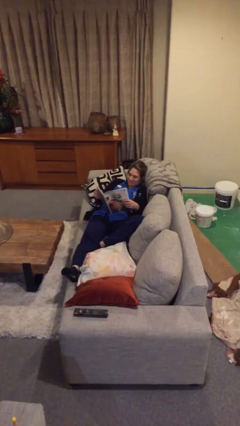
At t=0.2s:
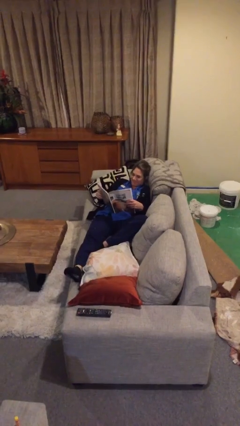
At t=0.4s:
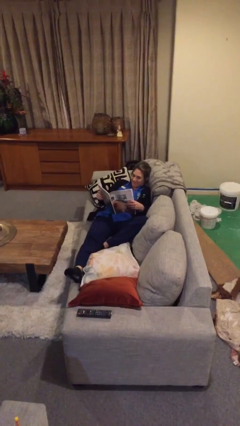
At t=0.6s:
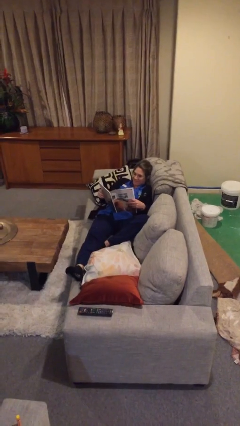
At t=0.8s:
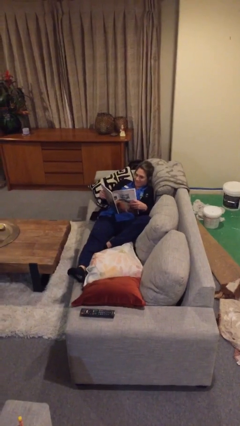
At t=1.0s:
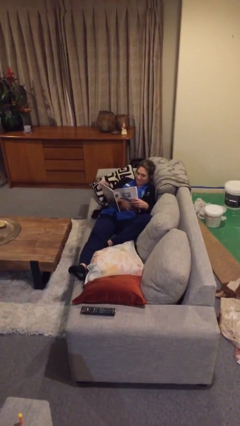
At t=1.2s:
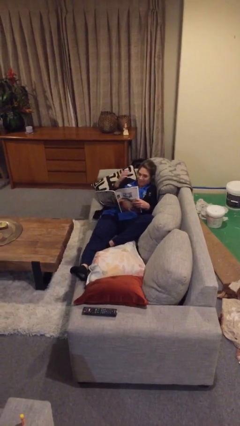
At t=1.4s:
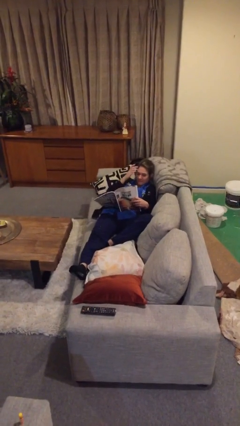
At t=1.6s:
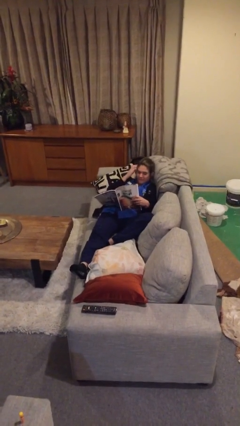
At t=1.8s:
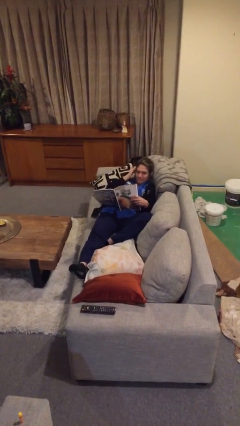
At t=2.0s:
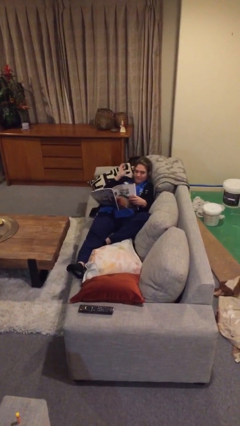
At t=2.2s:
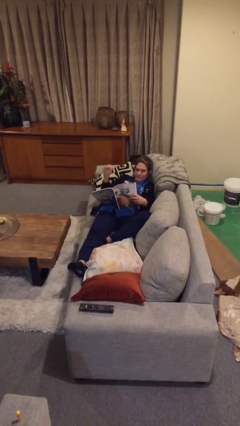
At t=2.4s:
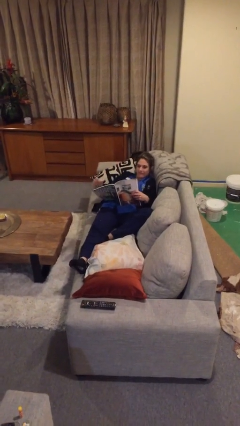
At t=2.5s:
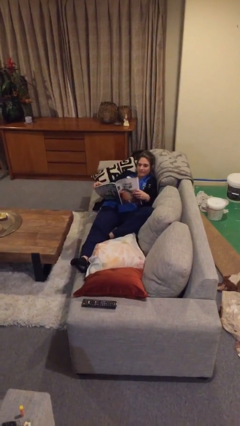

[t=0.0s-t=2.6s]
person reads document

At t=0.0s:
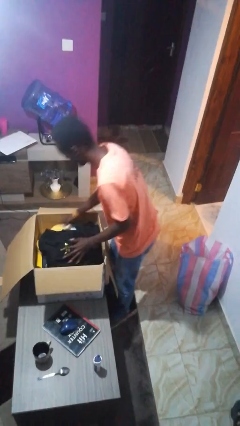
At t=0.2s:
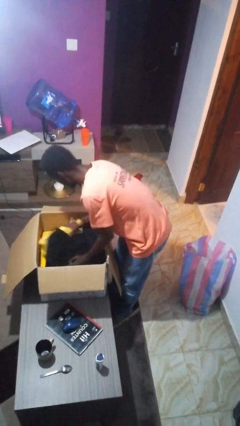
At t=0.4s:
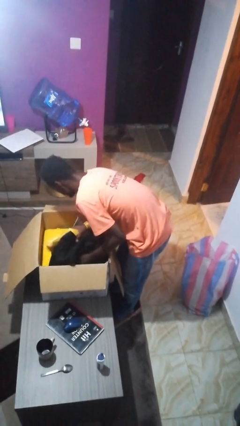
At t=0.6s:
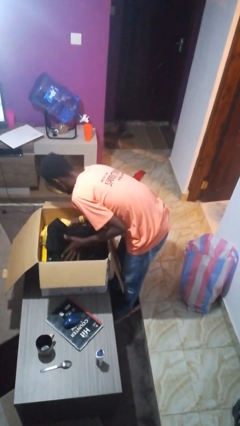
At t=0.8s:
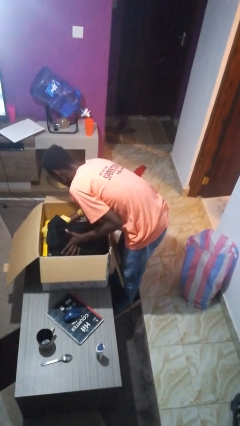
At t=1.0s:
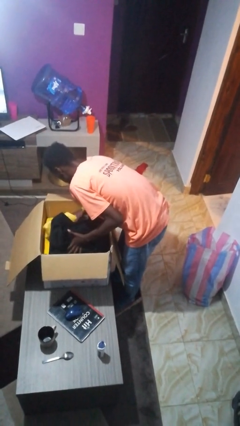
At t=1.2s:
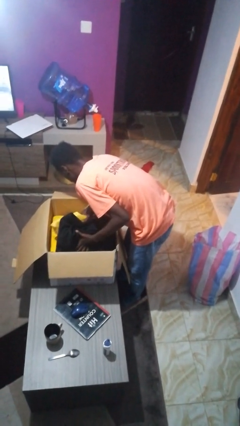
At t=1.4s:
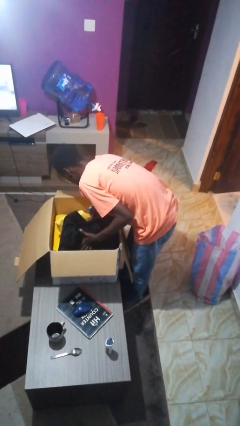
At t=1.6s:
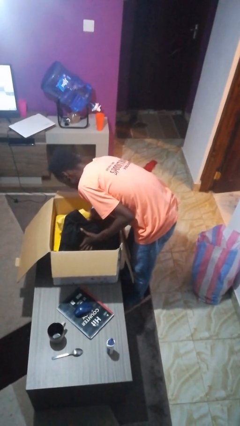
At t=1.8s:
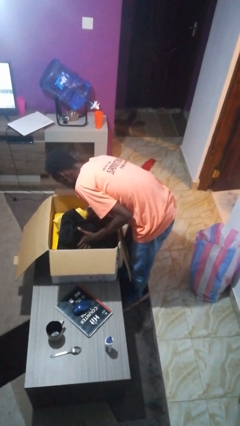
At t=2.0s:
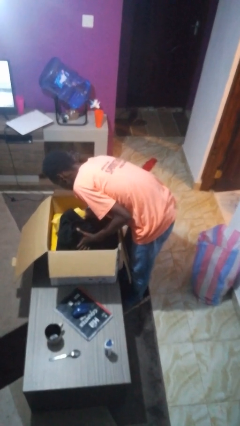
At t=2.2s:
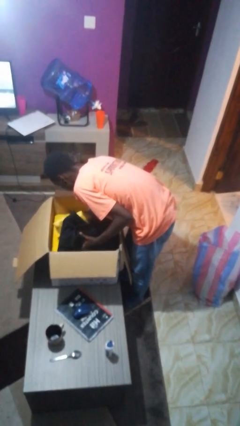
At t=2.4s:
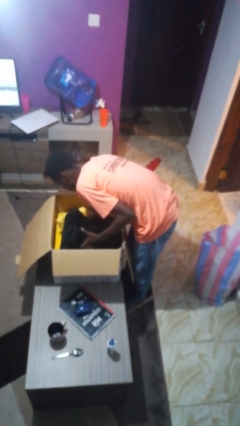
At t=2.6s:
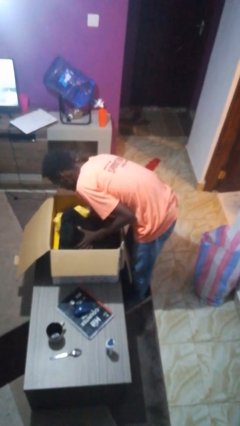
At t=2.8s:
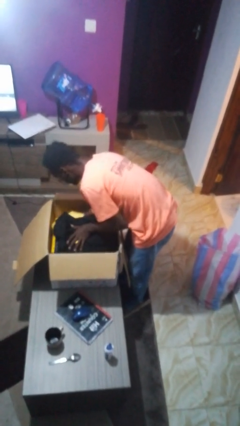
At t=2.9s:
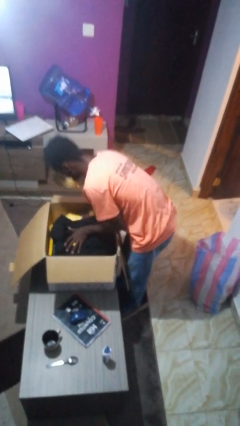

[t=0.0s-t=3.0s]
person searches in box

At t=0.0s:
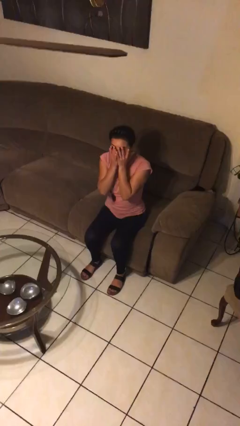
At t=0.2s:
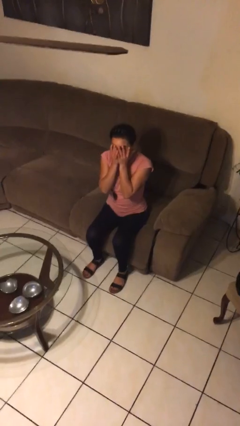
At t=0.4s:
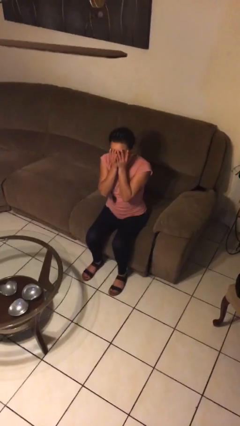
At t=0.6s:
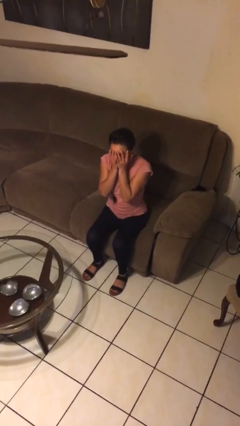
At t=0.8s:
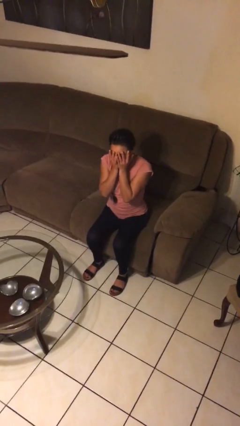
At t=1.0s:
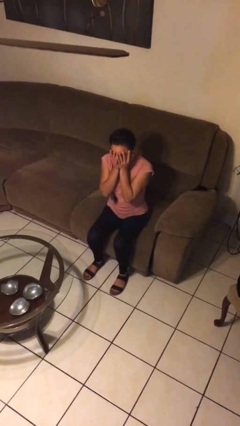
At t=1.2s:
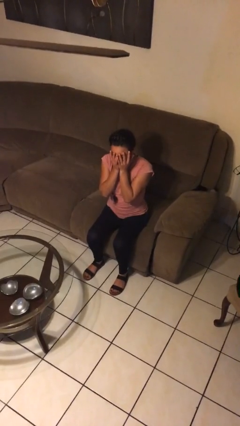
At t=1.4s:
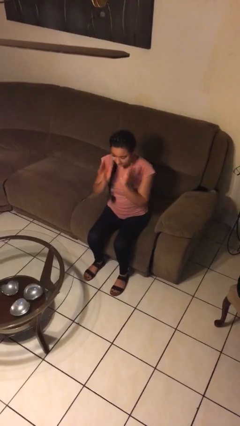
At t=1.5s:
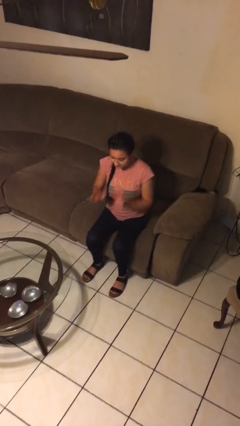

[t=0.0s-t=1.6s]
person covers face with hands

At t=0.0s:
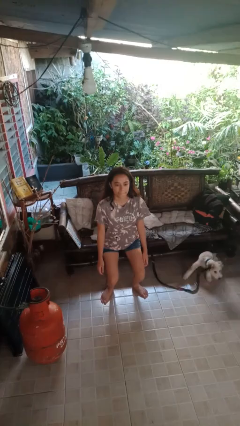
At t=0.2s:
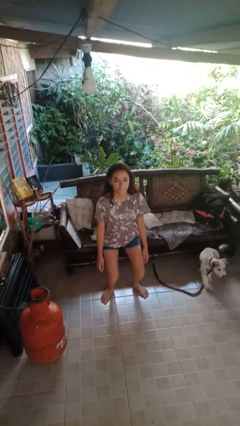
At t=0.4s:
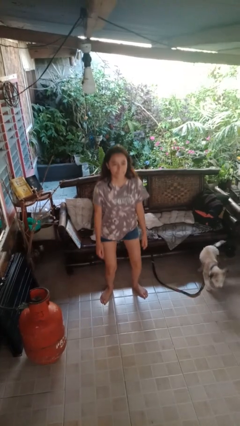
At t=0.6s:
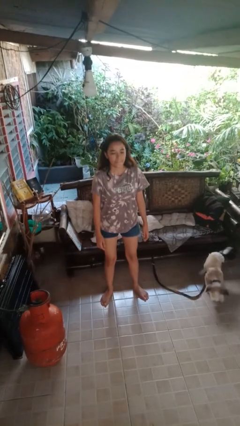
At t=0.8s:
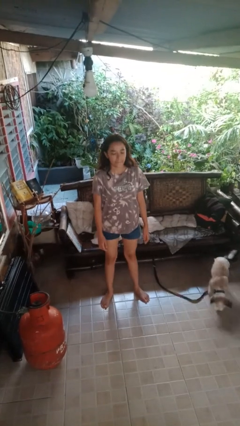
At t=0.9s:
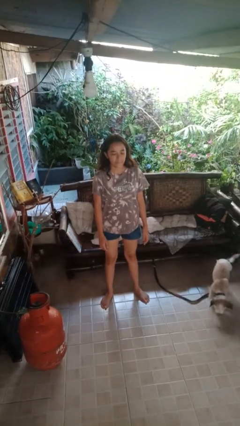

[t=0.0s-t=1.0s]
person stands up

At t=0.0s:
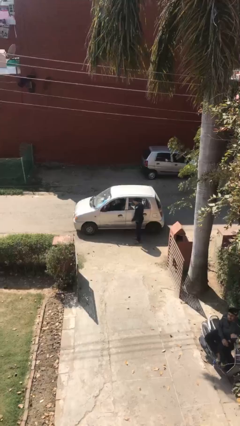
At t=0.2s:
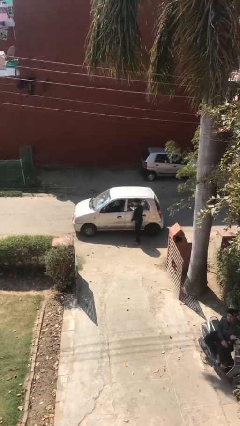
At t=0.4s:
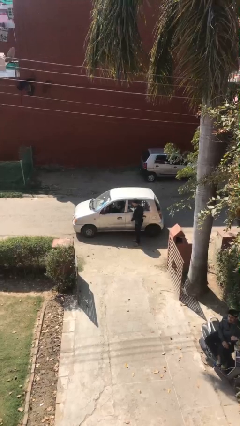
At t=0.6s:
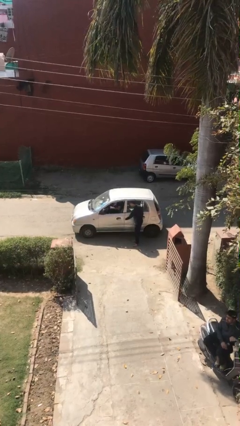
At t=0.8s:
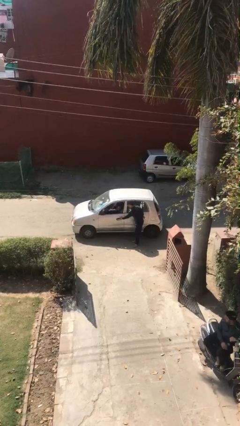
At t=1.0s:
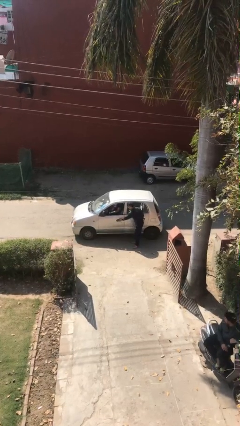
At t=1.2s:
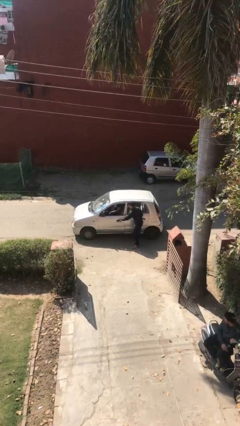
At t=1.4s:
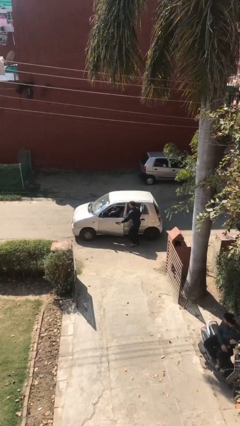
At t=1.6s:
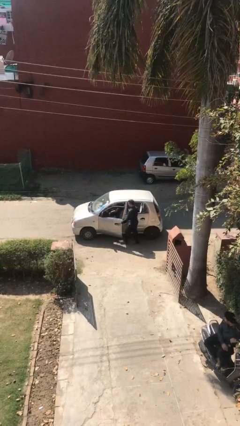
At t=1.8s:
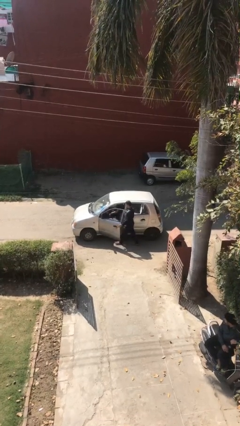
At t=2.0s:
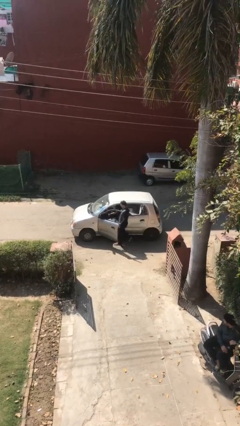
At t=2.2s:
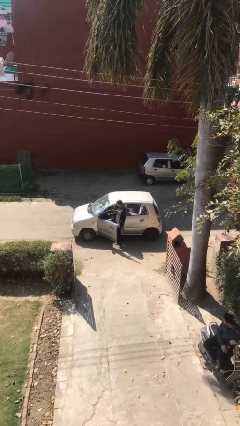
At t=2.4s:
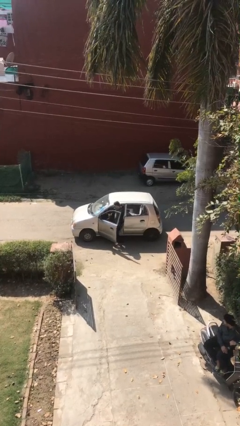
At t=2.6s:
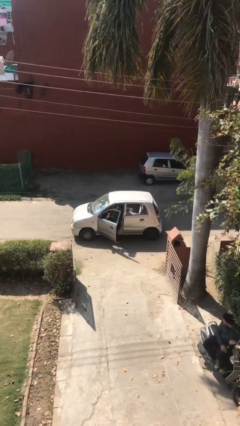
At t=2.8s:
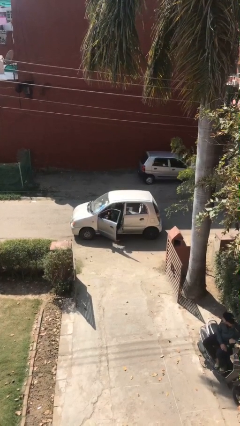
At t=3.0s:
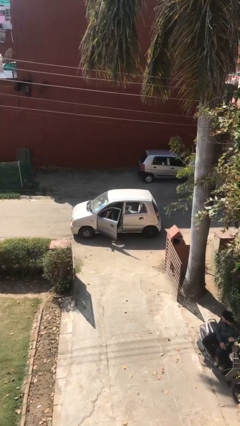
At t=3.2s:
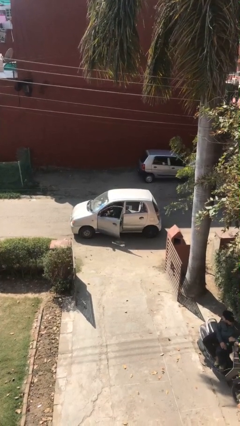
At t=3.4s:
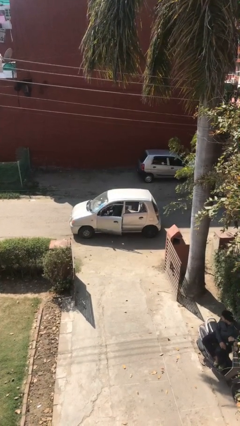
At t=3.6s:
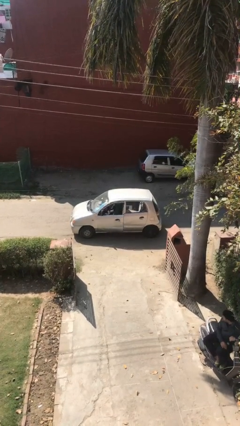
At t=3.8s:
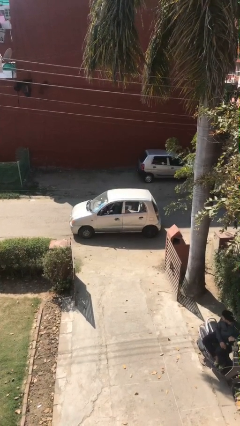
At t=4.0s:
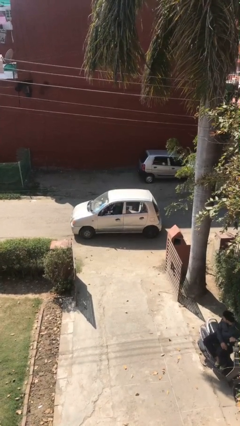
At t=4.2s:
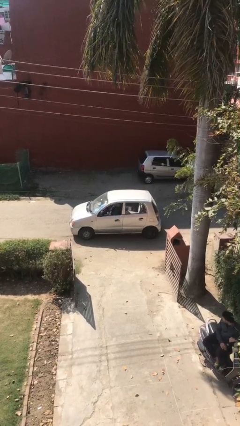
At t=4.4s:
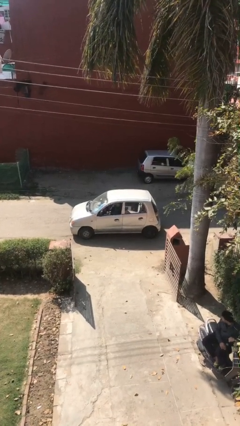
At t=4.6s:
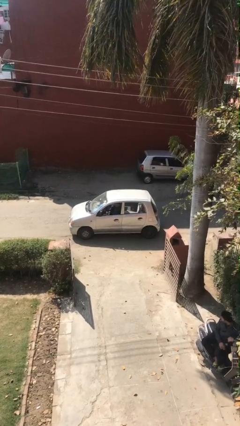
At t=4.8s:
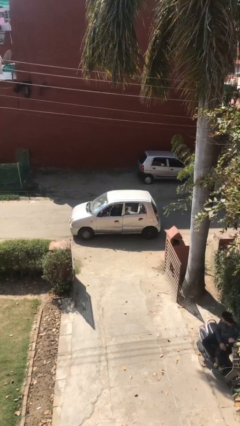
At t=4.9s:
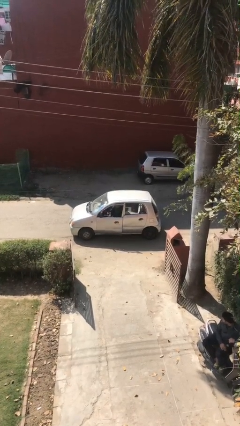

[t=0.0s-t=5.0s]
car picks up person

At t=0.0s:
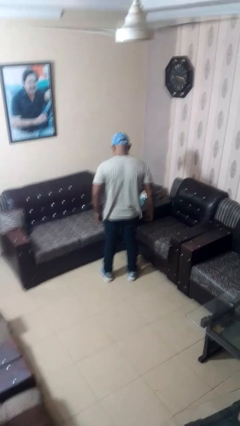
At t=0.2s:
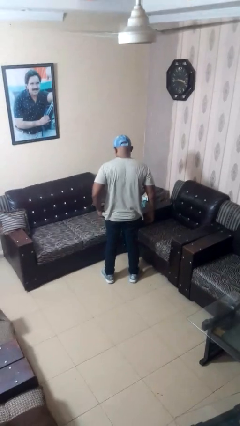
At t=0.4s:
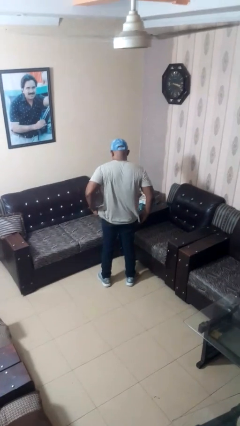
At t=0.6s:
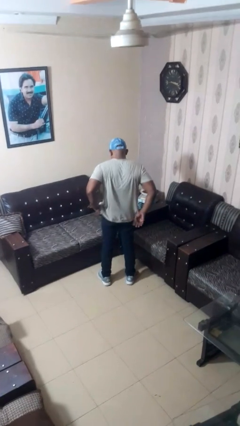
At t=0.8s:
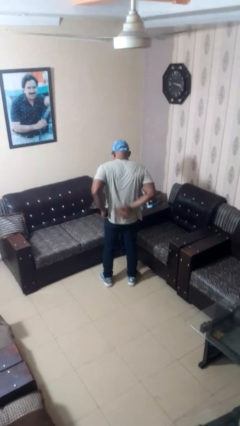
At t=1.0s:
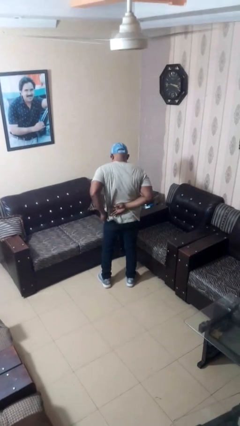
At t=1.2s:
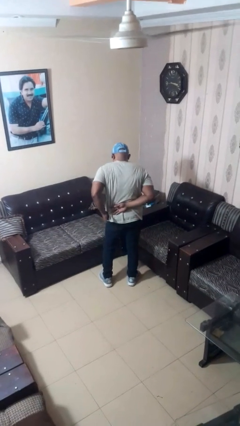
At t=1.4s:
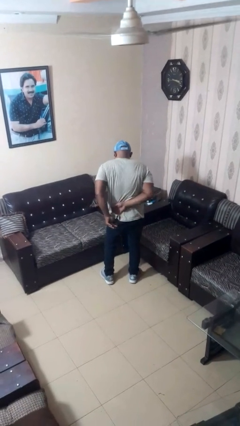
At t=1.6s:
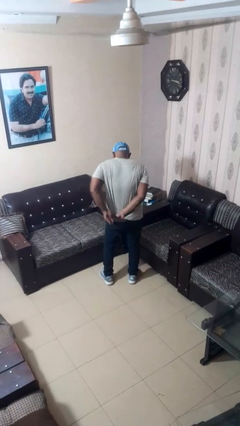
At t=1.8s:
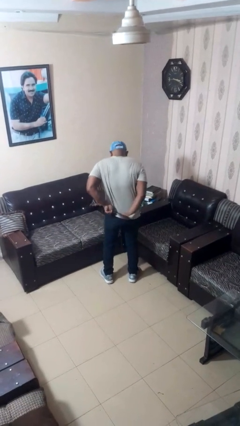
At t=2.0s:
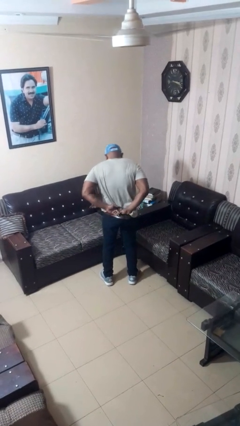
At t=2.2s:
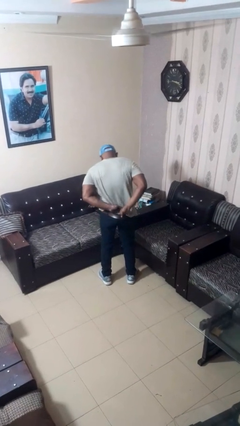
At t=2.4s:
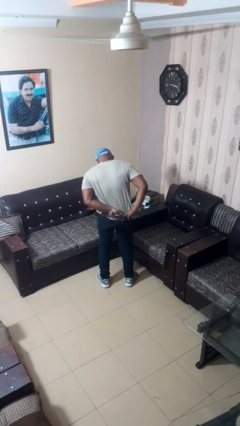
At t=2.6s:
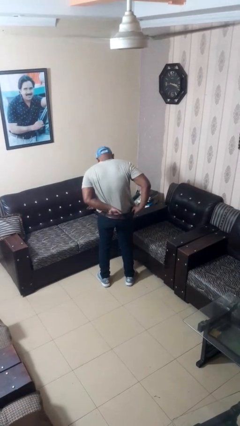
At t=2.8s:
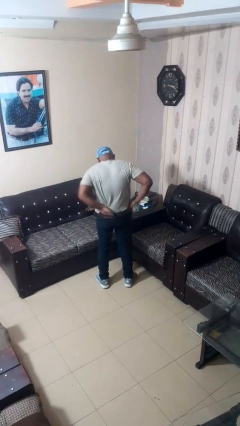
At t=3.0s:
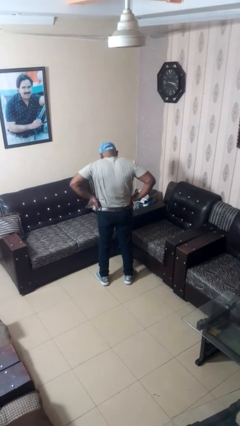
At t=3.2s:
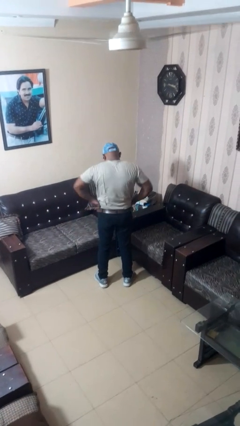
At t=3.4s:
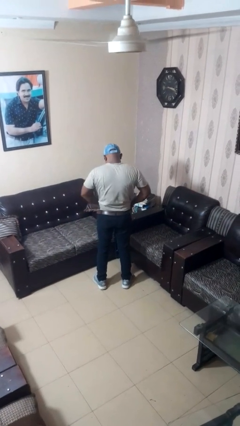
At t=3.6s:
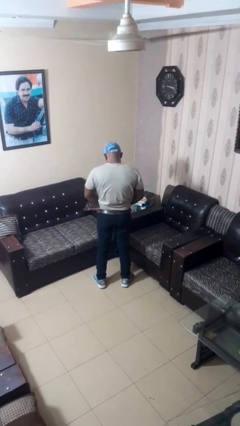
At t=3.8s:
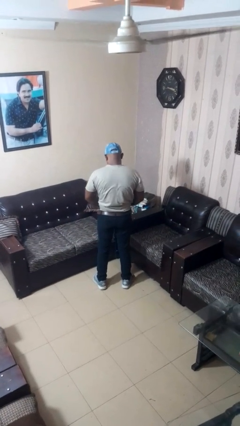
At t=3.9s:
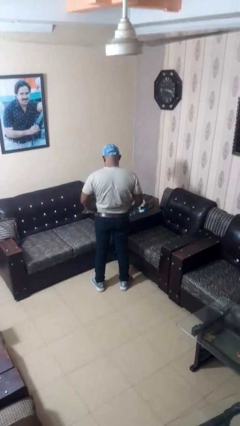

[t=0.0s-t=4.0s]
person tucks in shirt

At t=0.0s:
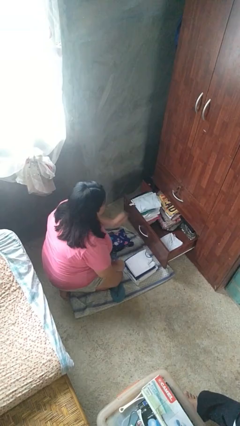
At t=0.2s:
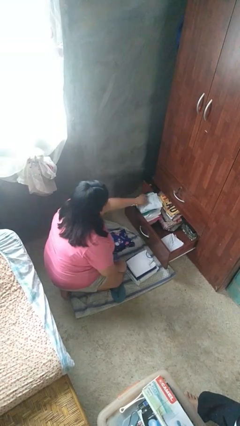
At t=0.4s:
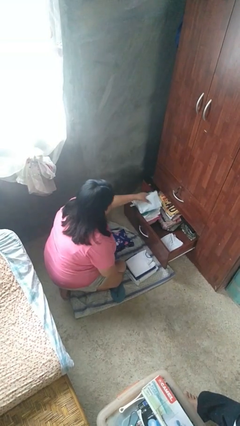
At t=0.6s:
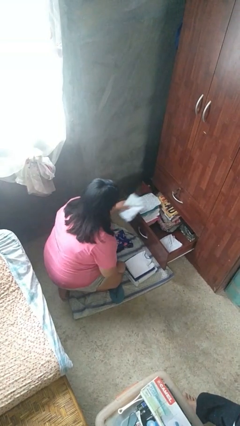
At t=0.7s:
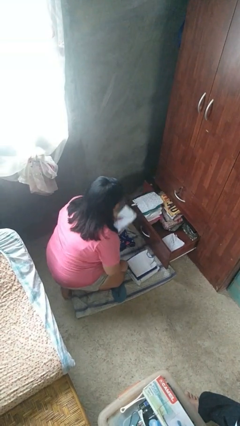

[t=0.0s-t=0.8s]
person takes clothes from dresser
